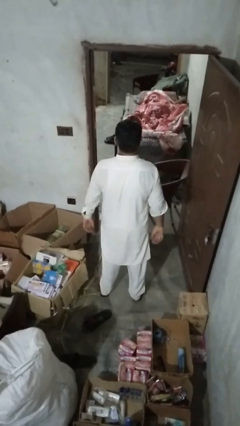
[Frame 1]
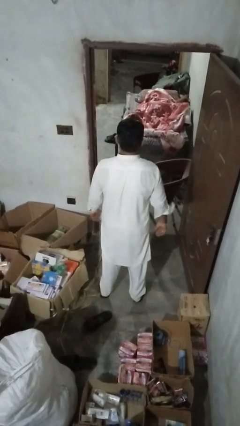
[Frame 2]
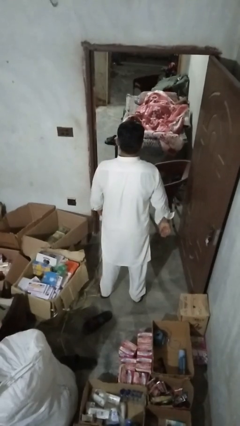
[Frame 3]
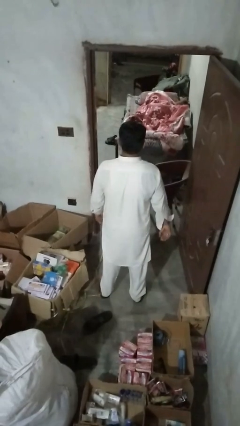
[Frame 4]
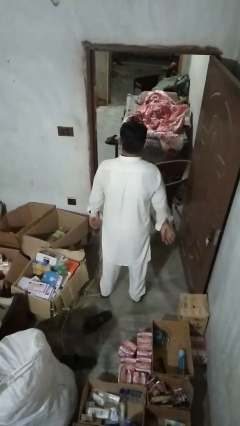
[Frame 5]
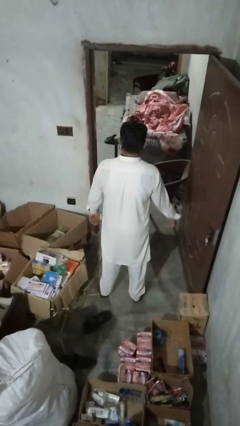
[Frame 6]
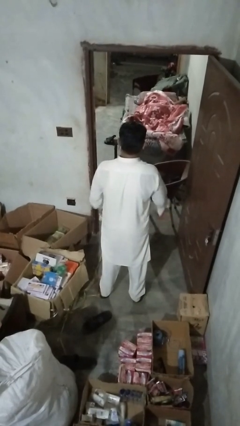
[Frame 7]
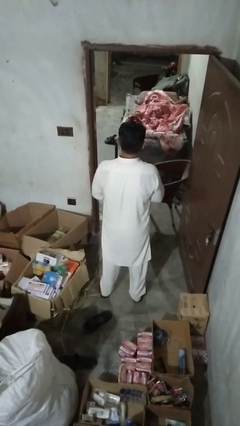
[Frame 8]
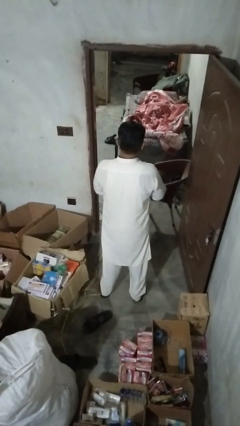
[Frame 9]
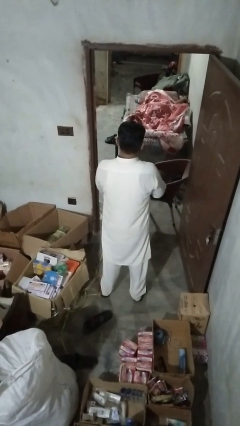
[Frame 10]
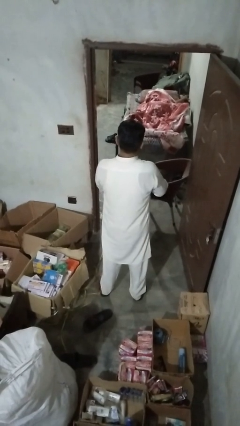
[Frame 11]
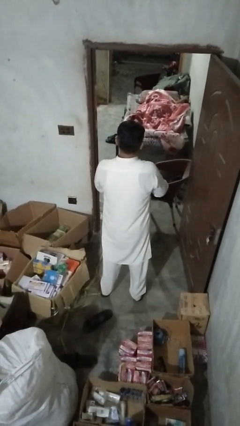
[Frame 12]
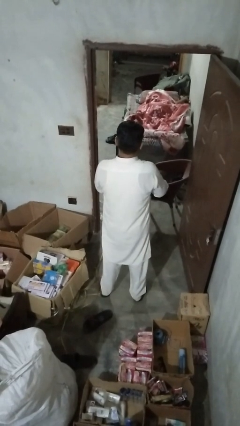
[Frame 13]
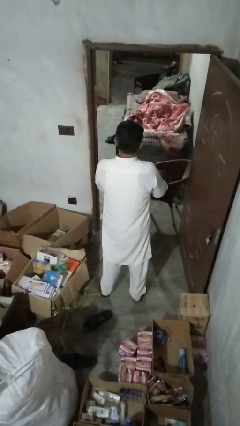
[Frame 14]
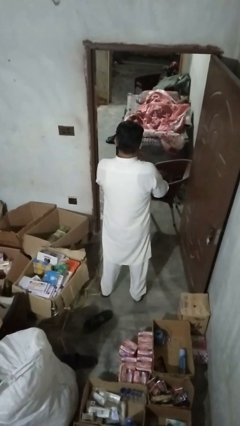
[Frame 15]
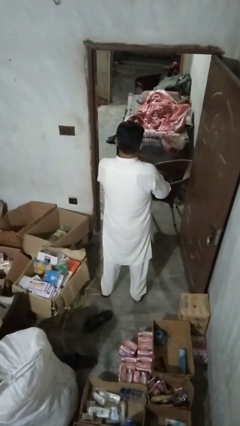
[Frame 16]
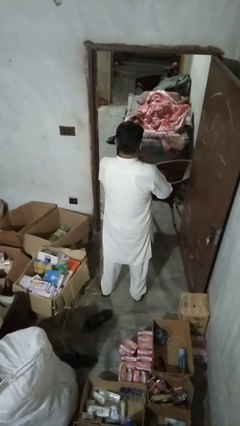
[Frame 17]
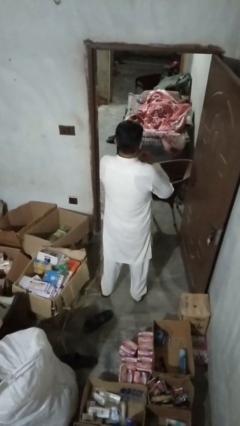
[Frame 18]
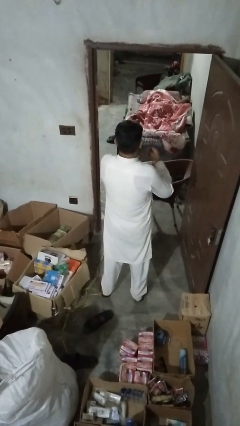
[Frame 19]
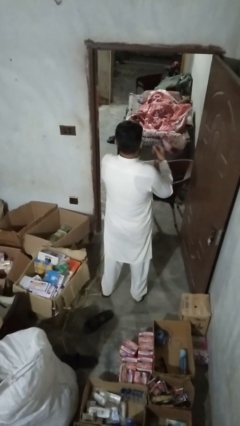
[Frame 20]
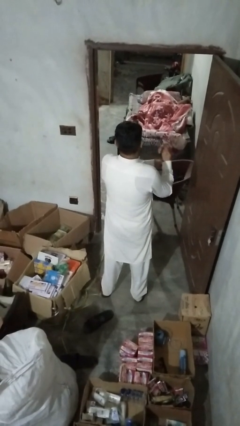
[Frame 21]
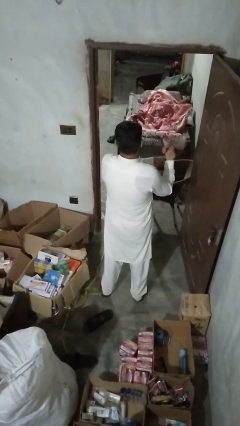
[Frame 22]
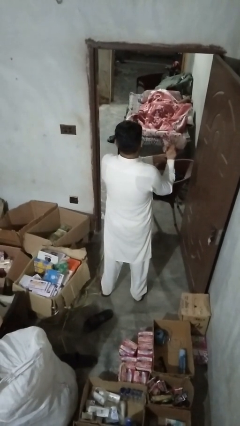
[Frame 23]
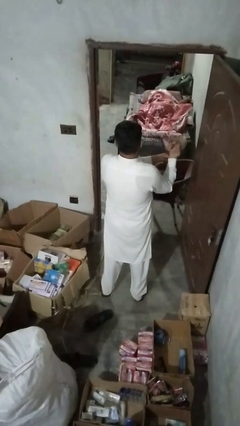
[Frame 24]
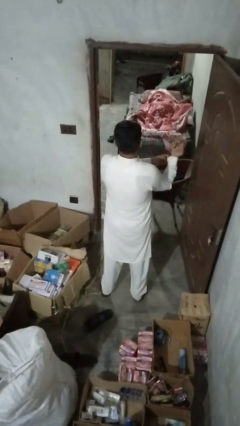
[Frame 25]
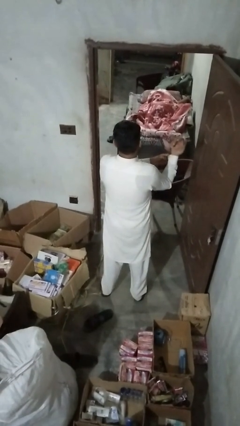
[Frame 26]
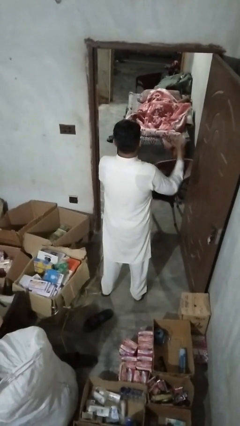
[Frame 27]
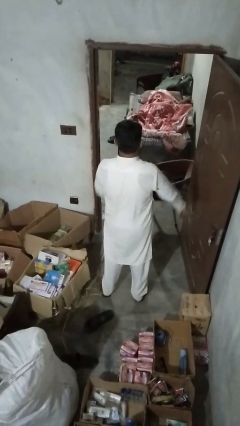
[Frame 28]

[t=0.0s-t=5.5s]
person buttons shirt

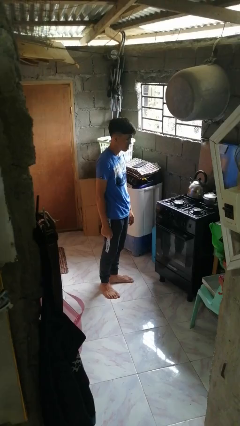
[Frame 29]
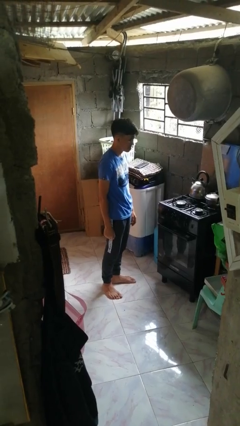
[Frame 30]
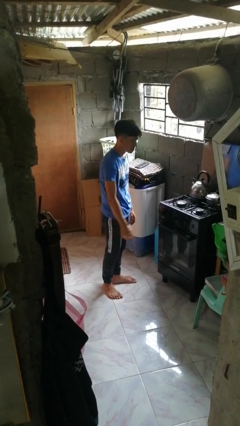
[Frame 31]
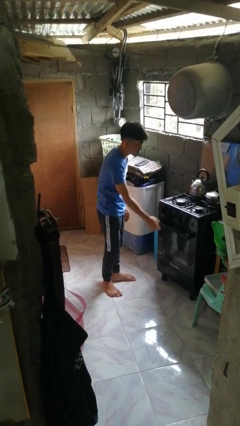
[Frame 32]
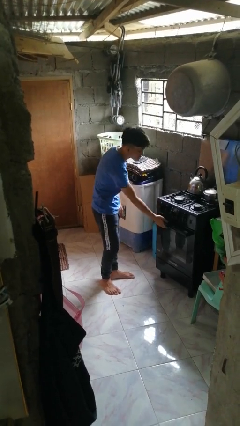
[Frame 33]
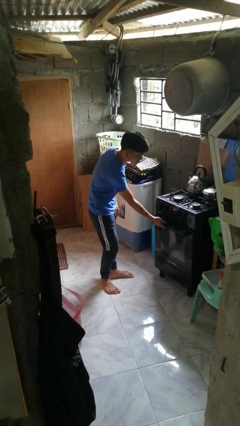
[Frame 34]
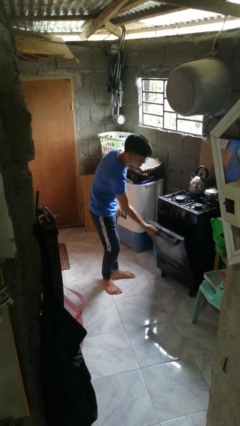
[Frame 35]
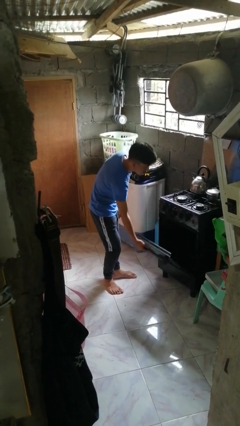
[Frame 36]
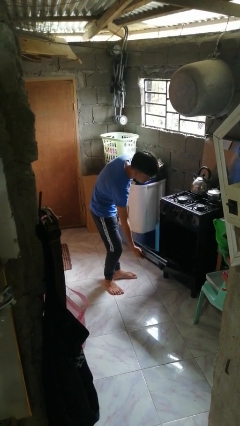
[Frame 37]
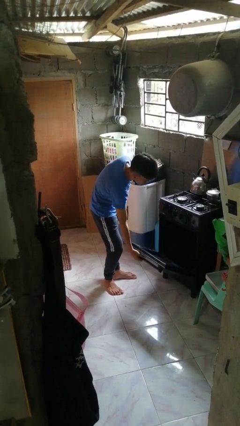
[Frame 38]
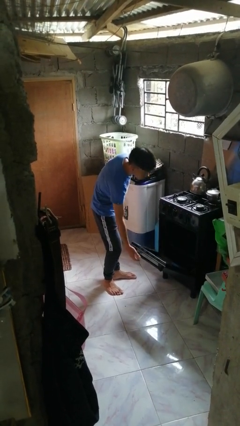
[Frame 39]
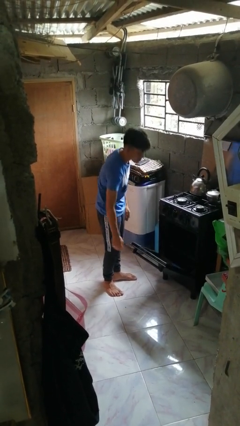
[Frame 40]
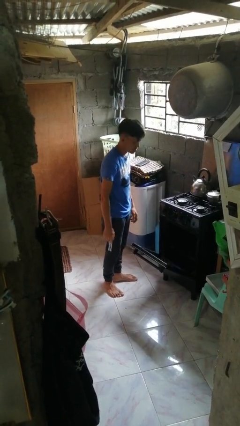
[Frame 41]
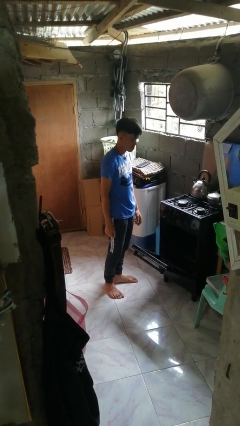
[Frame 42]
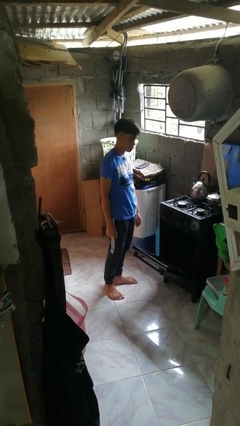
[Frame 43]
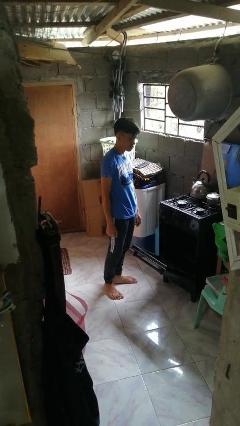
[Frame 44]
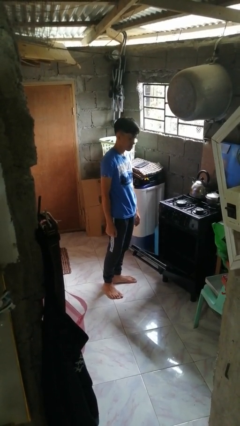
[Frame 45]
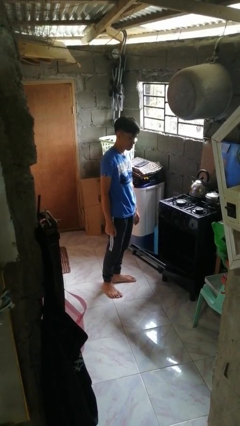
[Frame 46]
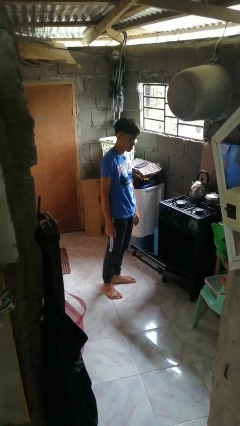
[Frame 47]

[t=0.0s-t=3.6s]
person opens oven door

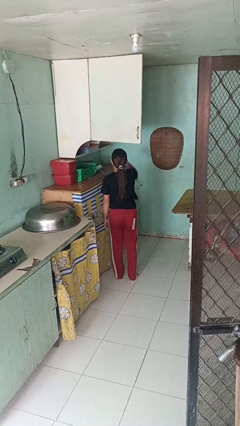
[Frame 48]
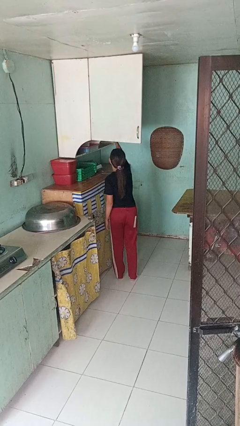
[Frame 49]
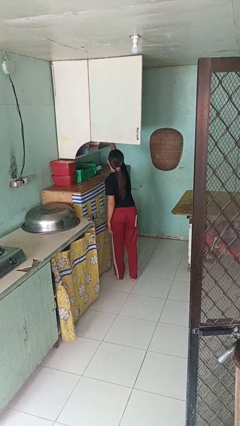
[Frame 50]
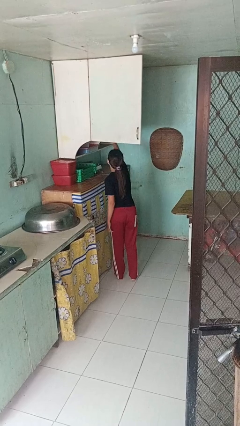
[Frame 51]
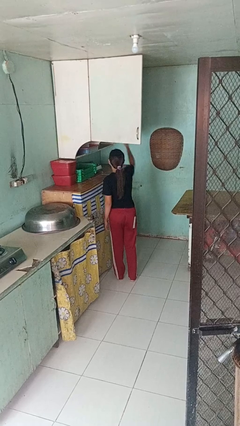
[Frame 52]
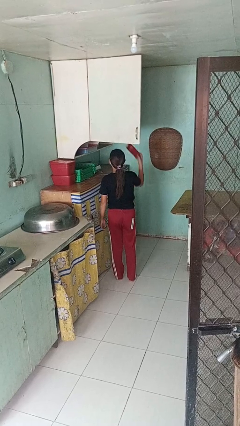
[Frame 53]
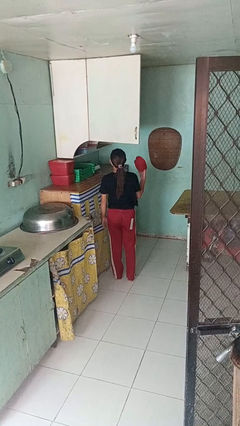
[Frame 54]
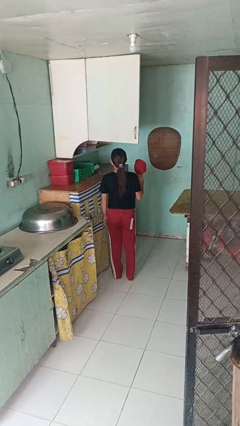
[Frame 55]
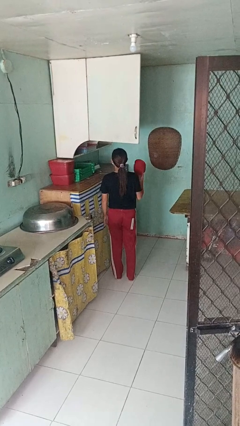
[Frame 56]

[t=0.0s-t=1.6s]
person takes object from cabinet

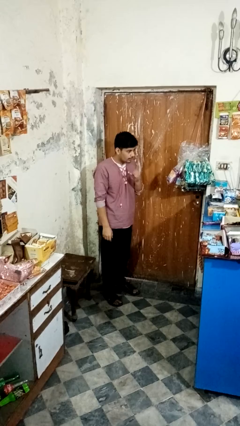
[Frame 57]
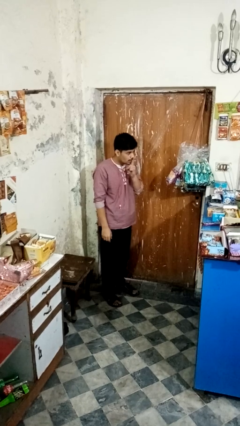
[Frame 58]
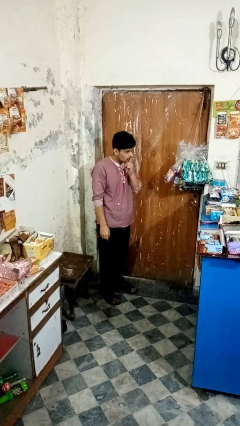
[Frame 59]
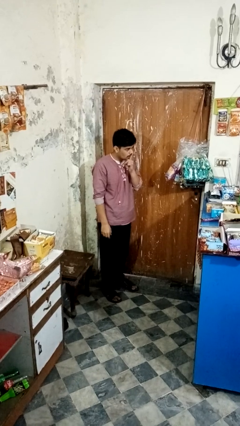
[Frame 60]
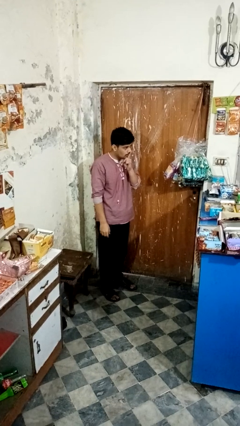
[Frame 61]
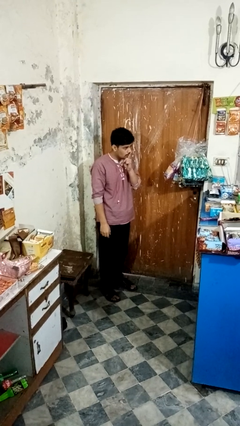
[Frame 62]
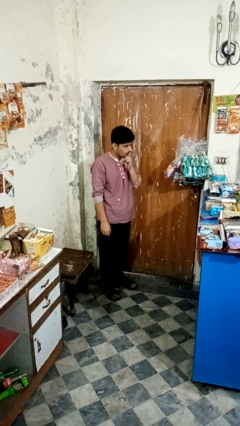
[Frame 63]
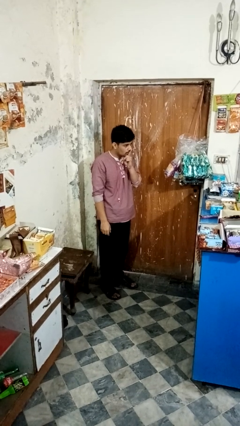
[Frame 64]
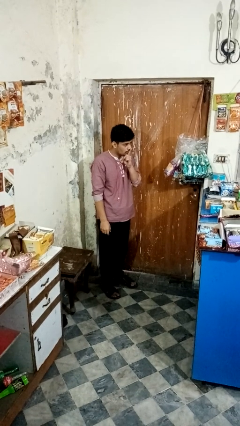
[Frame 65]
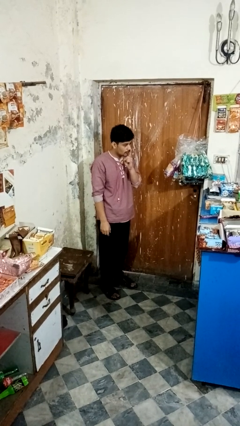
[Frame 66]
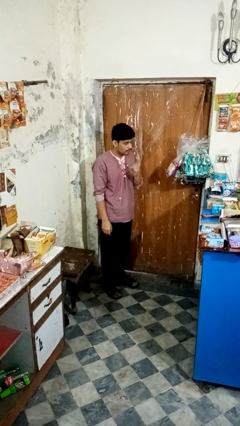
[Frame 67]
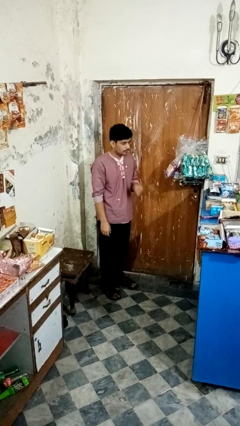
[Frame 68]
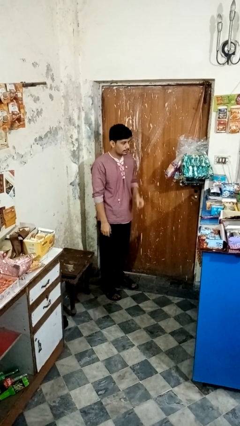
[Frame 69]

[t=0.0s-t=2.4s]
person gestures be quiet

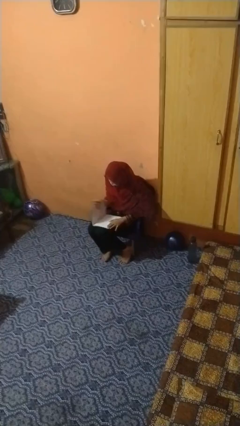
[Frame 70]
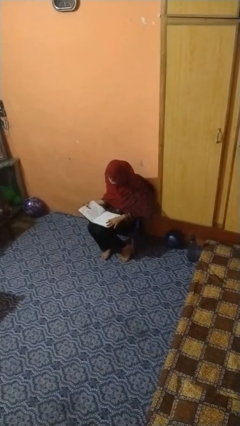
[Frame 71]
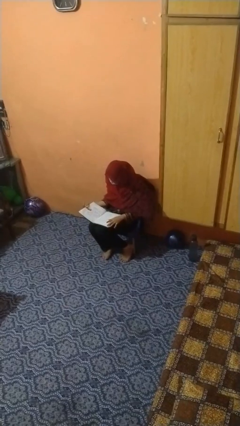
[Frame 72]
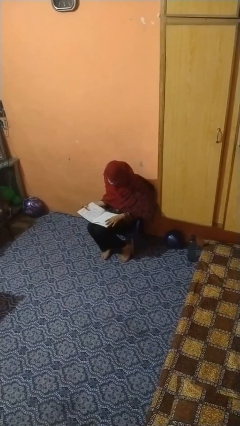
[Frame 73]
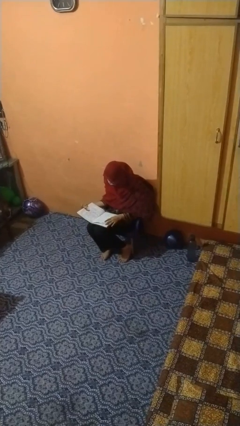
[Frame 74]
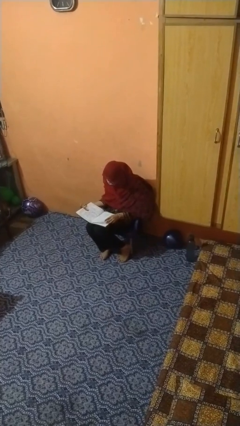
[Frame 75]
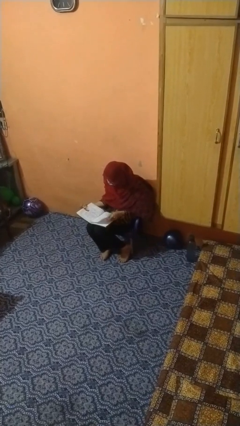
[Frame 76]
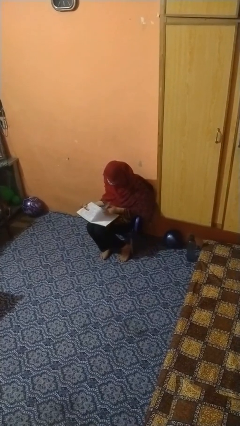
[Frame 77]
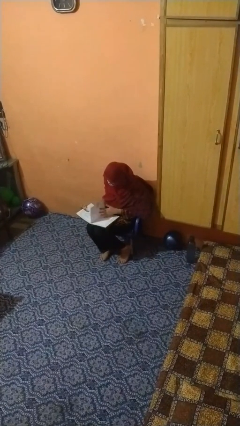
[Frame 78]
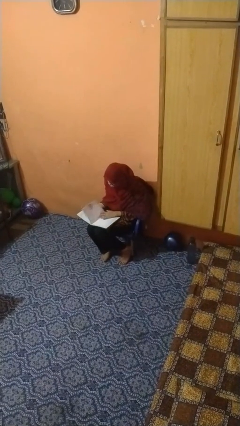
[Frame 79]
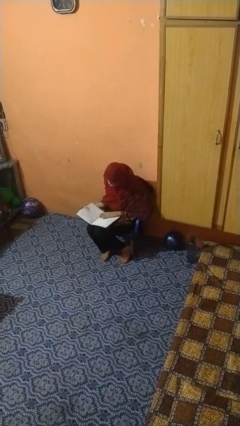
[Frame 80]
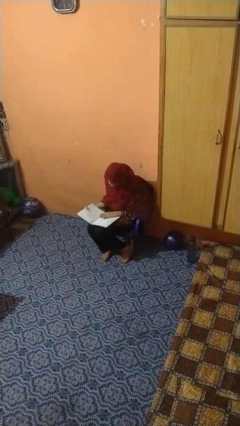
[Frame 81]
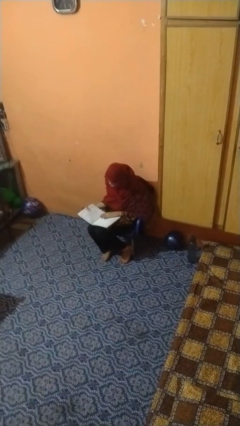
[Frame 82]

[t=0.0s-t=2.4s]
person reads book

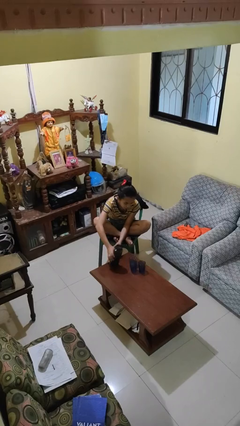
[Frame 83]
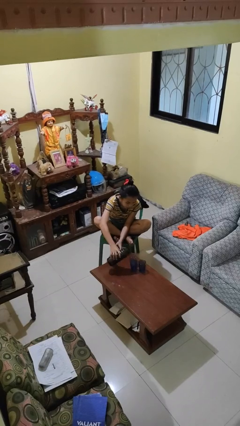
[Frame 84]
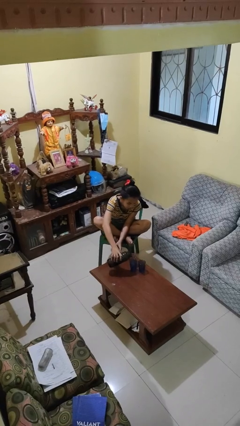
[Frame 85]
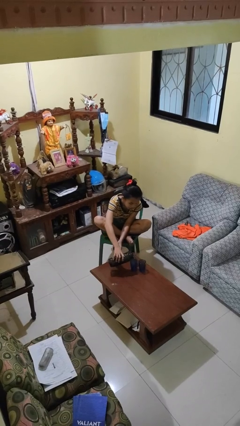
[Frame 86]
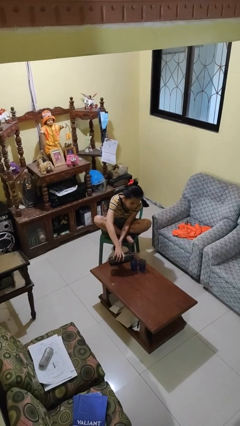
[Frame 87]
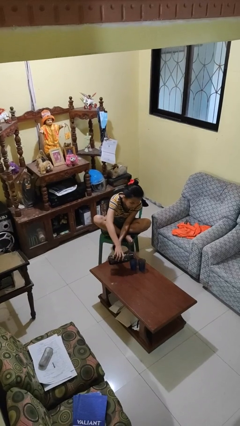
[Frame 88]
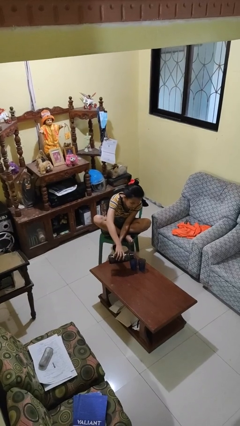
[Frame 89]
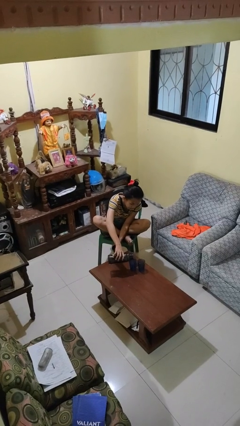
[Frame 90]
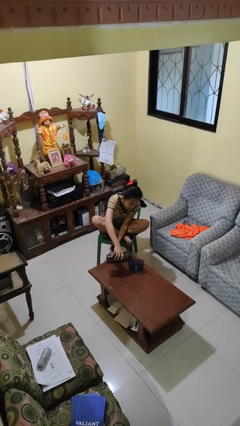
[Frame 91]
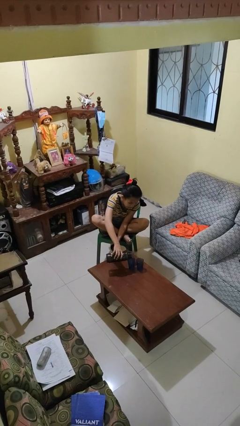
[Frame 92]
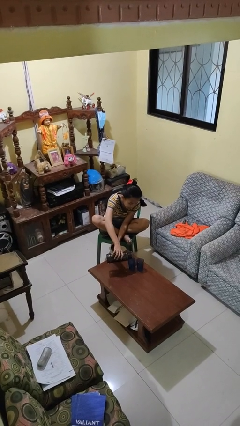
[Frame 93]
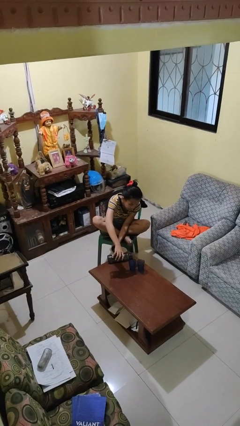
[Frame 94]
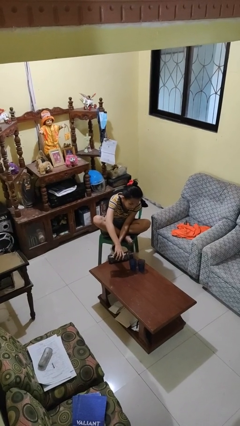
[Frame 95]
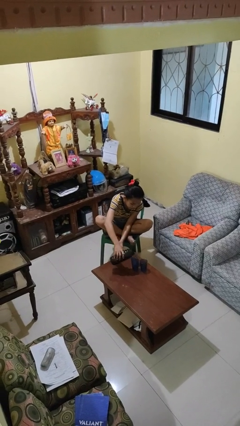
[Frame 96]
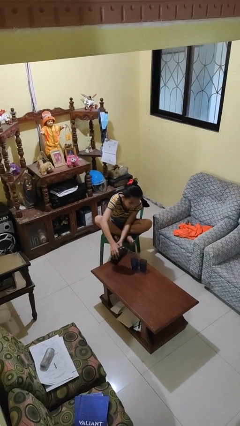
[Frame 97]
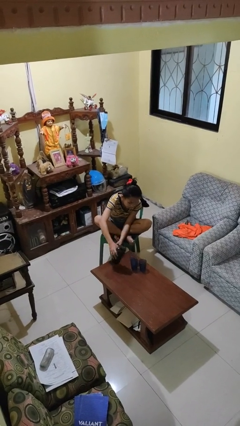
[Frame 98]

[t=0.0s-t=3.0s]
person pours liquid into cup
